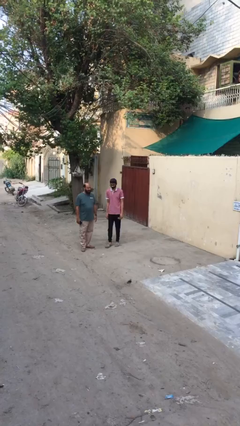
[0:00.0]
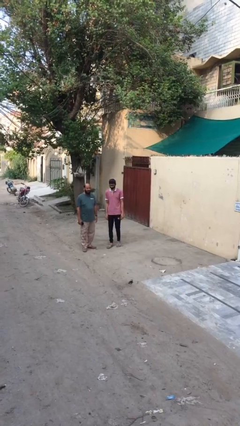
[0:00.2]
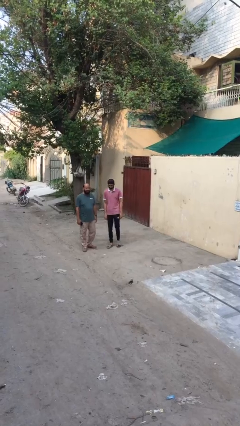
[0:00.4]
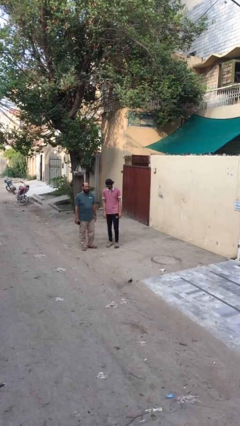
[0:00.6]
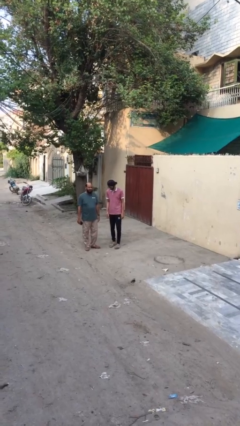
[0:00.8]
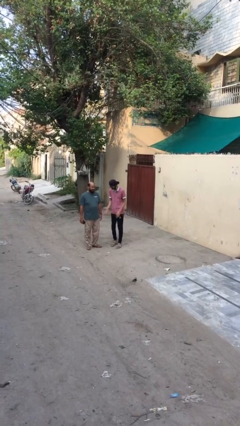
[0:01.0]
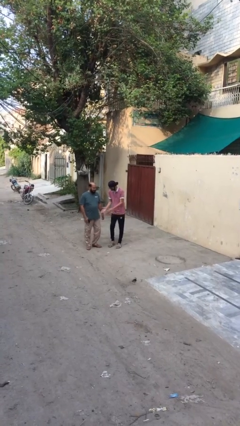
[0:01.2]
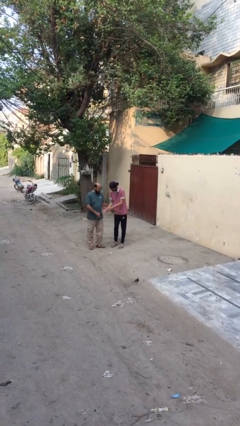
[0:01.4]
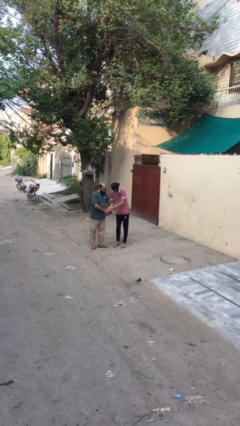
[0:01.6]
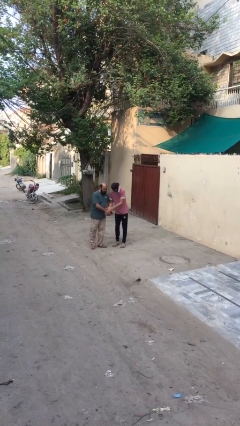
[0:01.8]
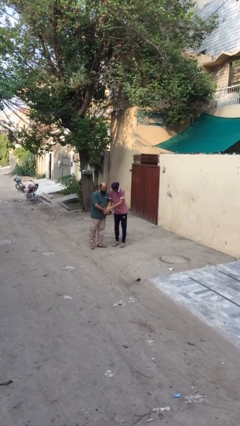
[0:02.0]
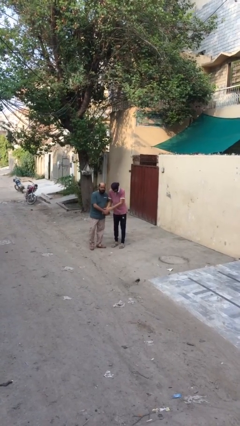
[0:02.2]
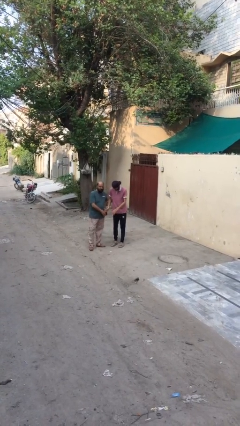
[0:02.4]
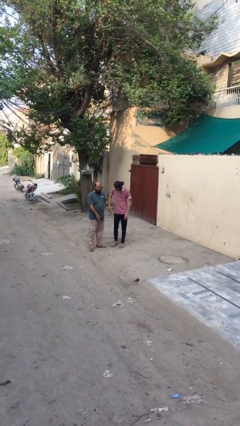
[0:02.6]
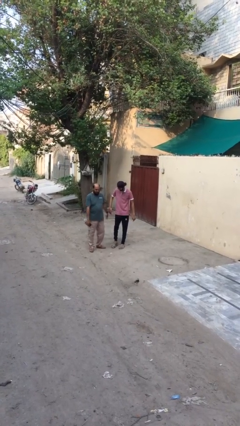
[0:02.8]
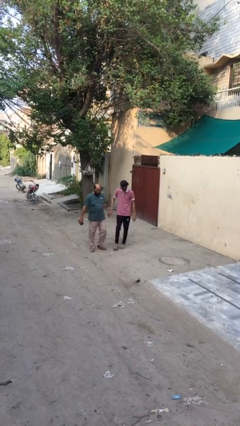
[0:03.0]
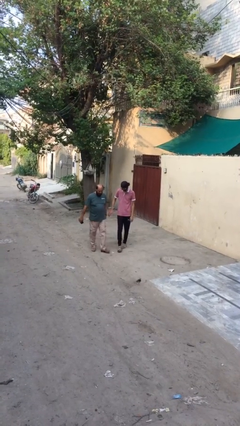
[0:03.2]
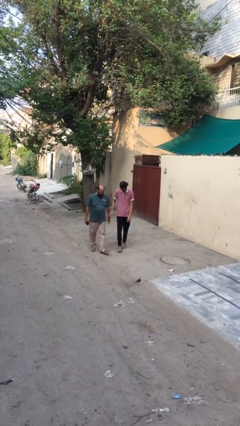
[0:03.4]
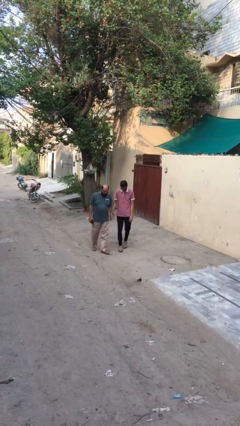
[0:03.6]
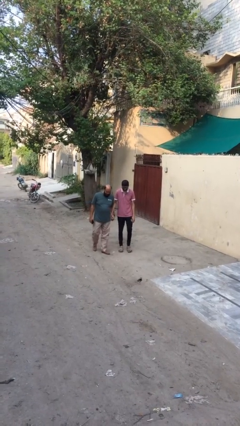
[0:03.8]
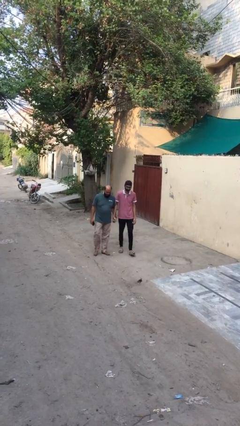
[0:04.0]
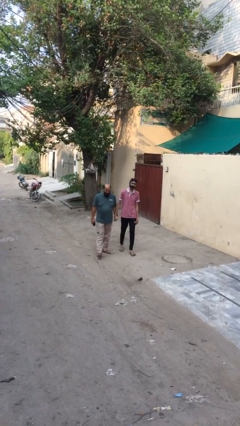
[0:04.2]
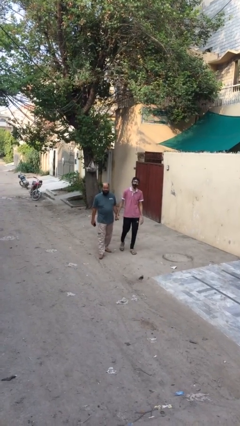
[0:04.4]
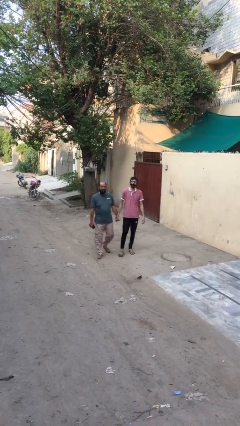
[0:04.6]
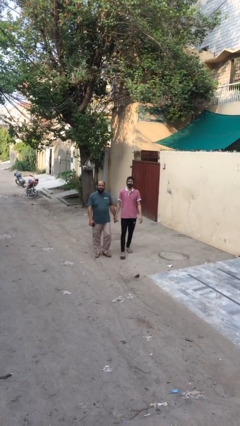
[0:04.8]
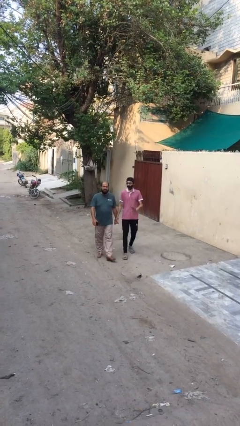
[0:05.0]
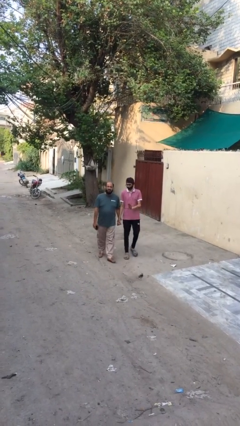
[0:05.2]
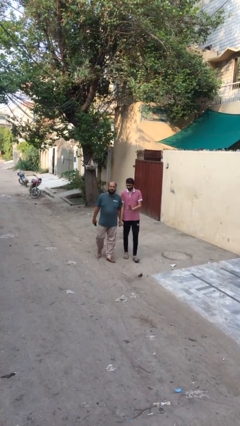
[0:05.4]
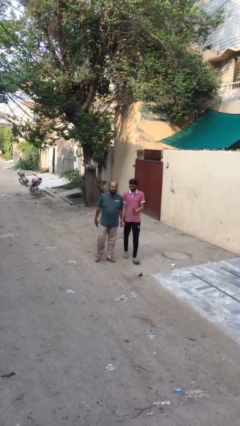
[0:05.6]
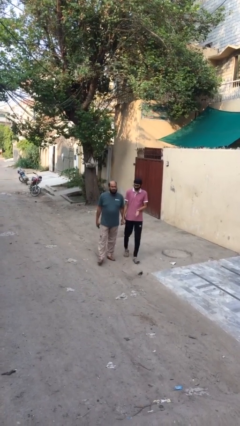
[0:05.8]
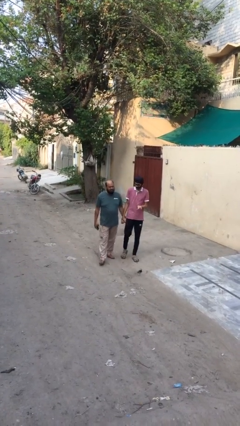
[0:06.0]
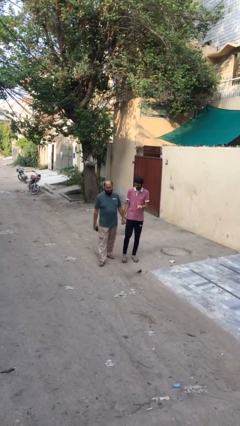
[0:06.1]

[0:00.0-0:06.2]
person holds hand

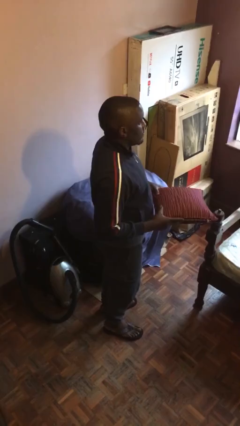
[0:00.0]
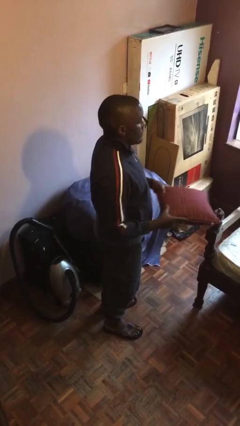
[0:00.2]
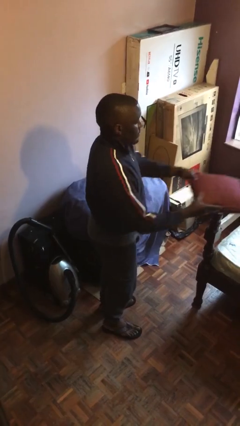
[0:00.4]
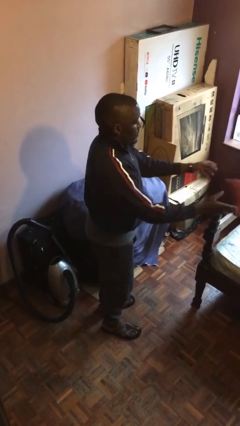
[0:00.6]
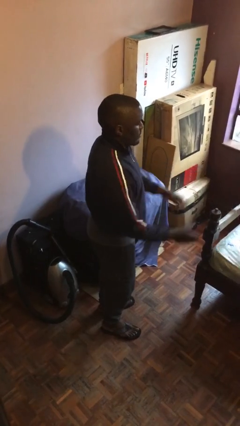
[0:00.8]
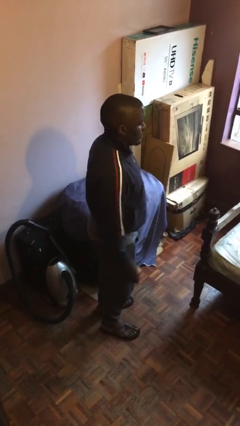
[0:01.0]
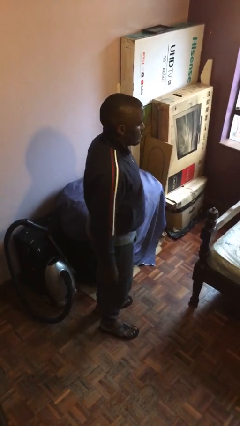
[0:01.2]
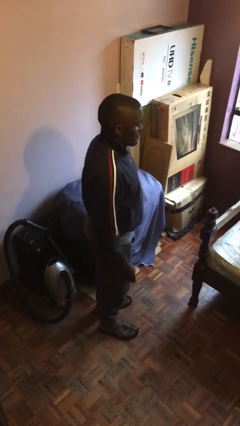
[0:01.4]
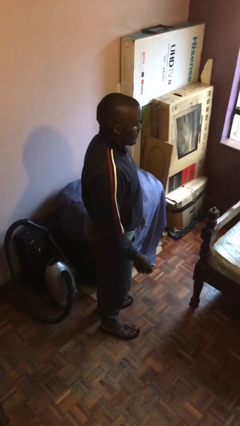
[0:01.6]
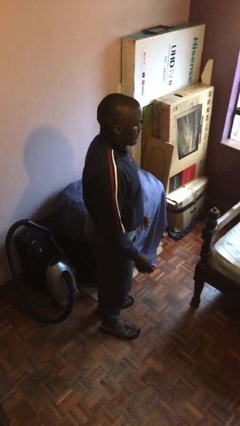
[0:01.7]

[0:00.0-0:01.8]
person throws object on bed

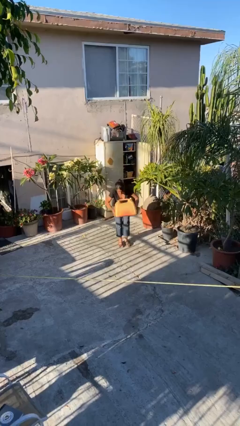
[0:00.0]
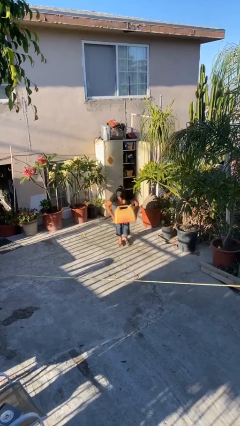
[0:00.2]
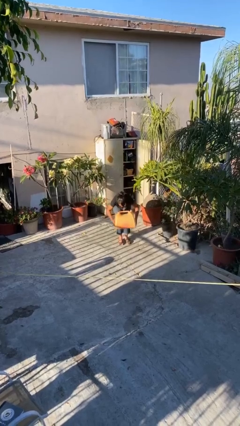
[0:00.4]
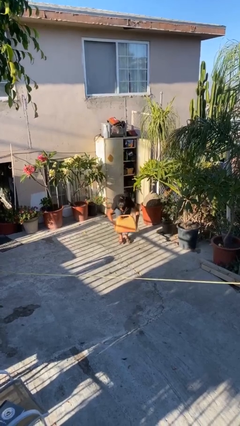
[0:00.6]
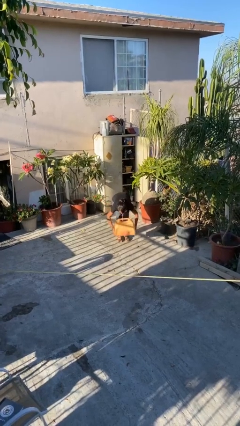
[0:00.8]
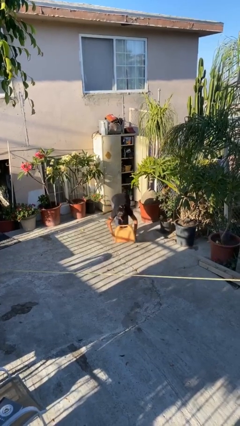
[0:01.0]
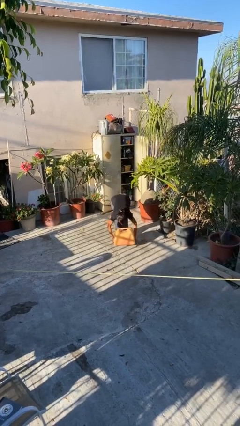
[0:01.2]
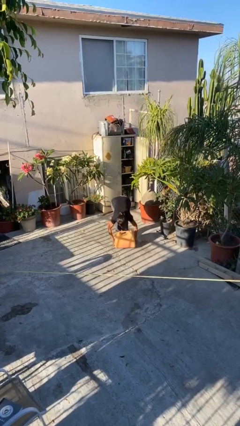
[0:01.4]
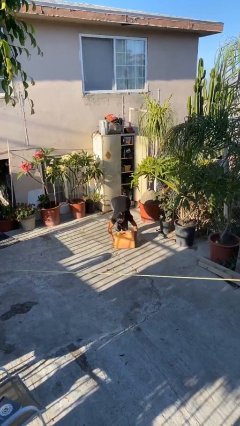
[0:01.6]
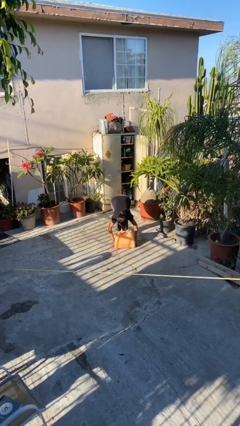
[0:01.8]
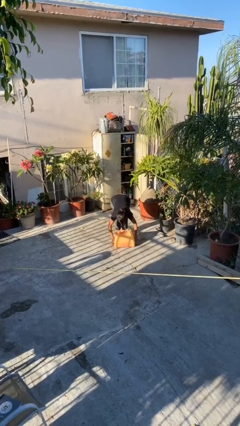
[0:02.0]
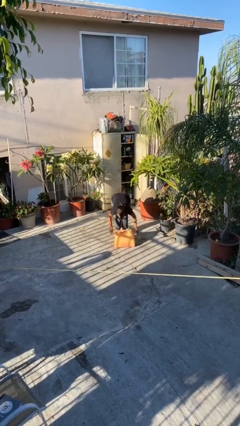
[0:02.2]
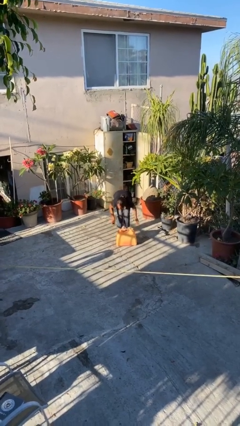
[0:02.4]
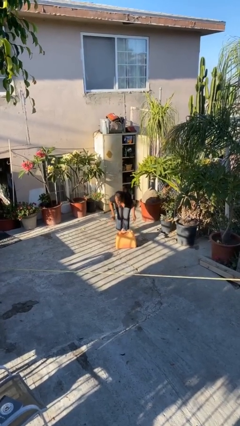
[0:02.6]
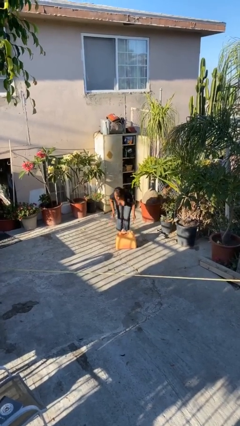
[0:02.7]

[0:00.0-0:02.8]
person puts down object on floor

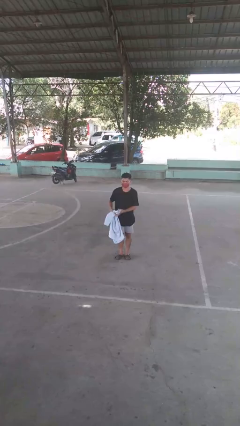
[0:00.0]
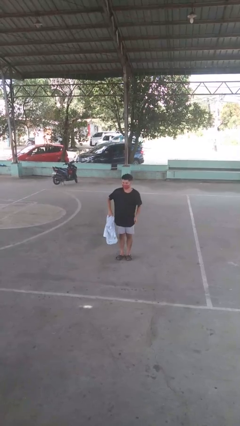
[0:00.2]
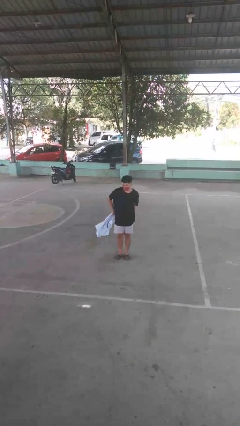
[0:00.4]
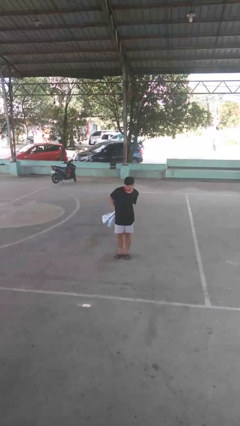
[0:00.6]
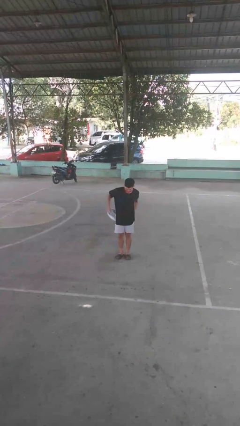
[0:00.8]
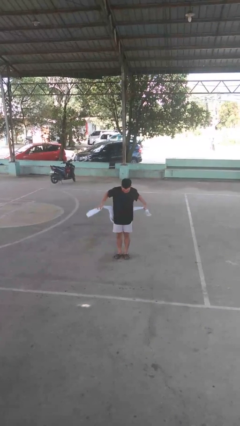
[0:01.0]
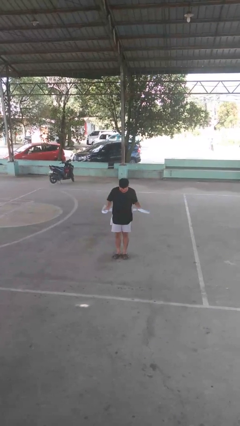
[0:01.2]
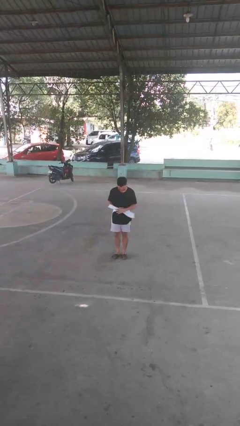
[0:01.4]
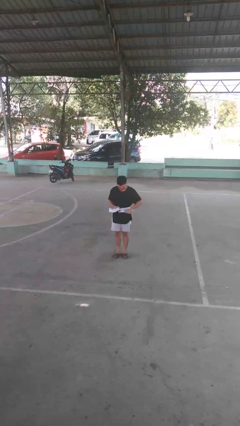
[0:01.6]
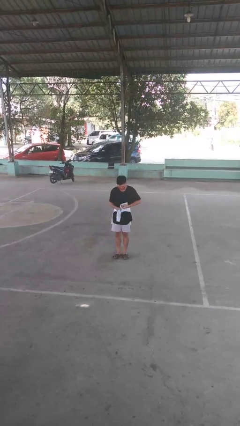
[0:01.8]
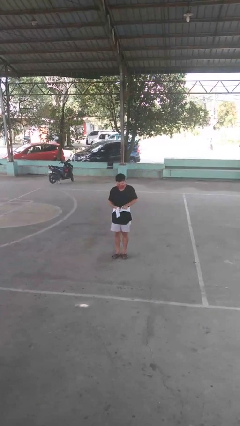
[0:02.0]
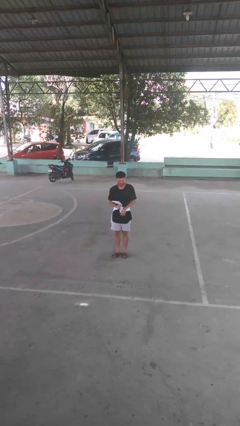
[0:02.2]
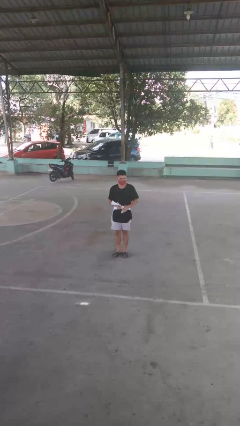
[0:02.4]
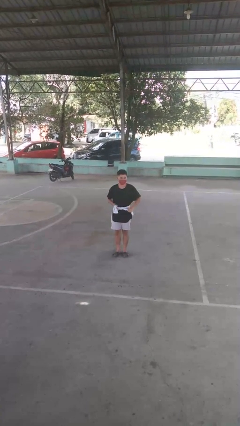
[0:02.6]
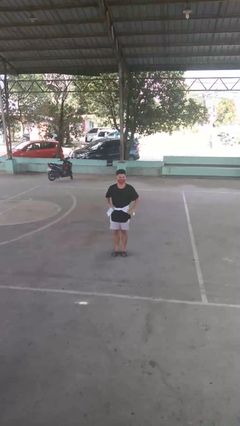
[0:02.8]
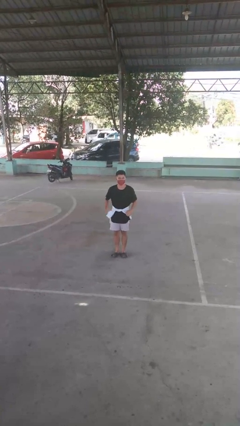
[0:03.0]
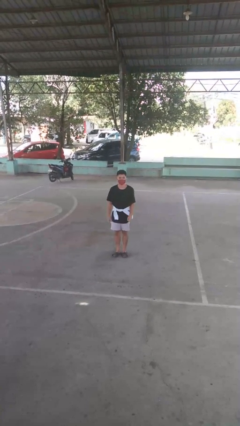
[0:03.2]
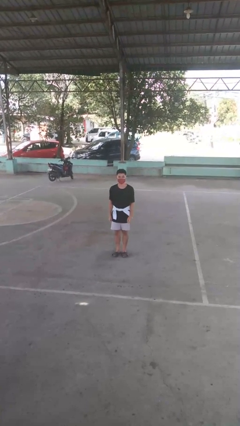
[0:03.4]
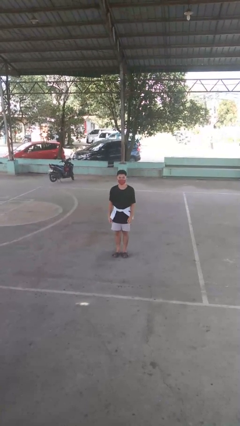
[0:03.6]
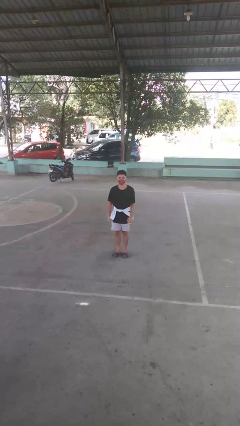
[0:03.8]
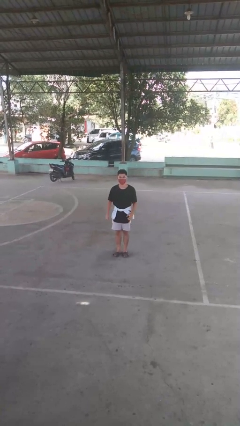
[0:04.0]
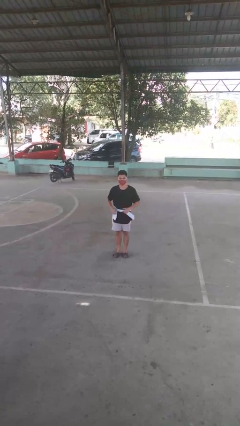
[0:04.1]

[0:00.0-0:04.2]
person ties jacket around waist

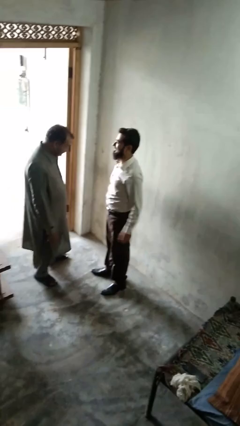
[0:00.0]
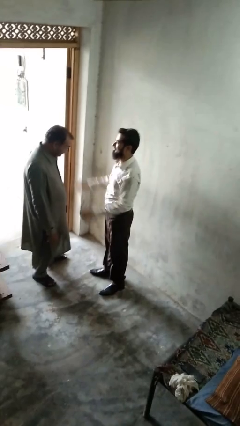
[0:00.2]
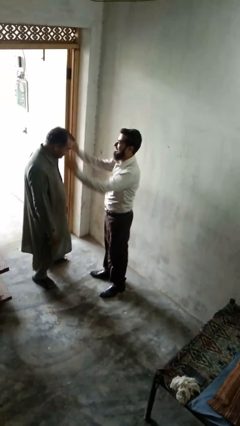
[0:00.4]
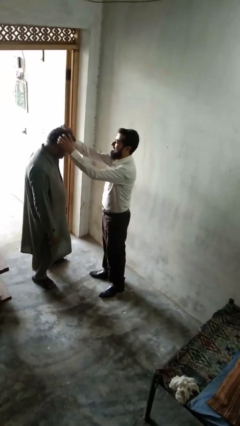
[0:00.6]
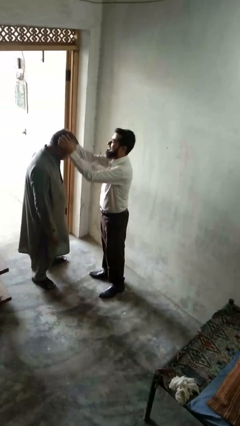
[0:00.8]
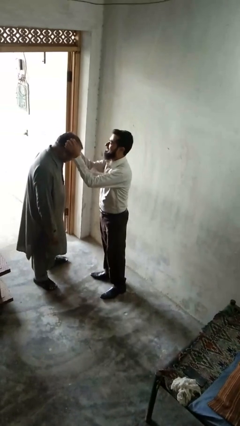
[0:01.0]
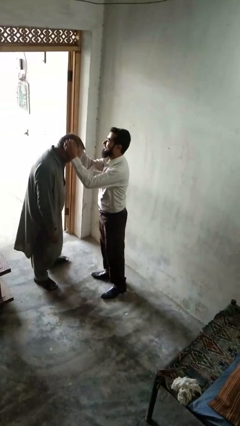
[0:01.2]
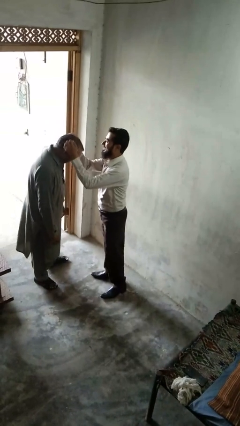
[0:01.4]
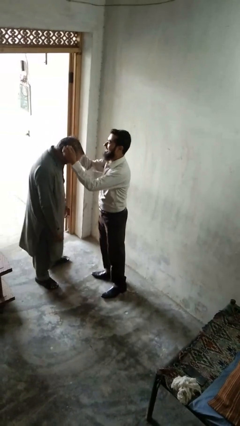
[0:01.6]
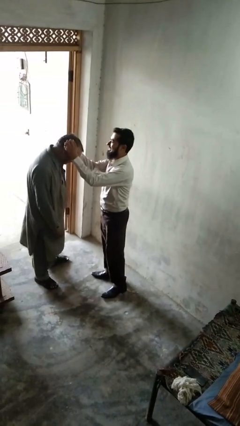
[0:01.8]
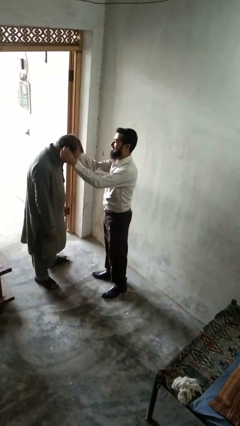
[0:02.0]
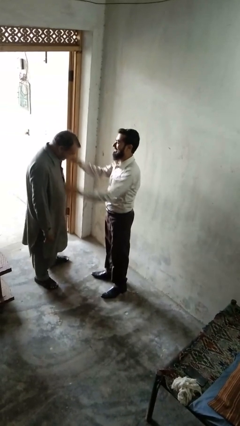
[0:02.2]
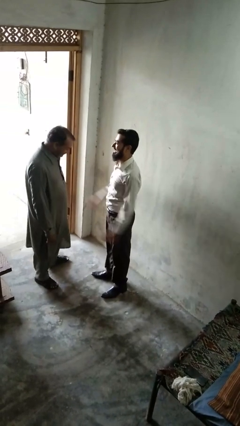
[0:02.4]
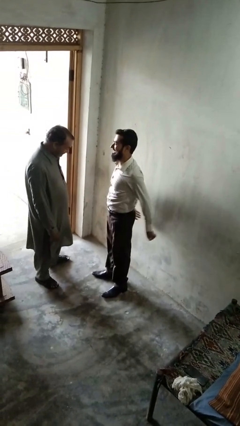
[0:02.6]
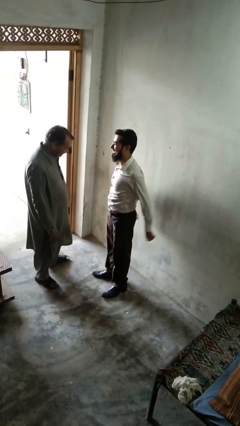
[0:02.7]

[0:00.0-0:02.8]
person grabs person by hair
